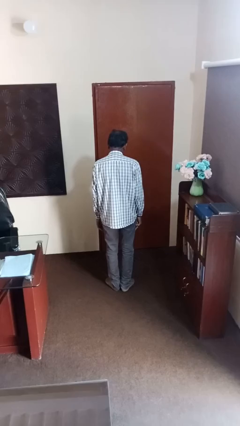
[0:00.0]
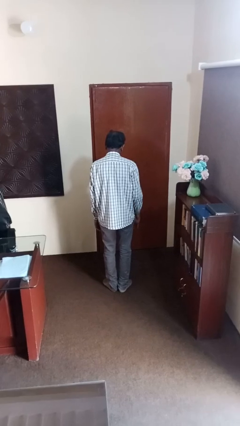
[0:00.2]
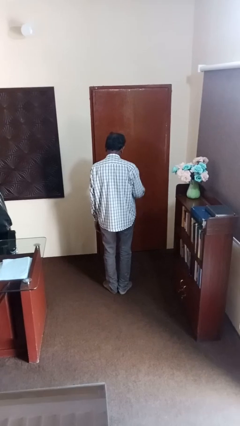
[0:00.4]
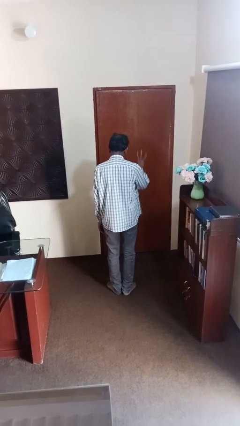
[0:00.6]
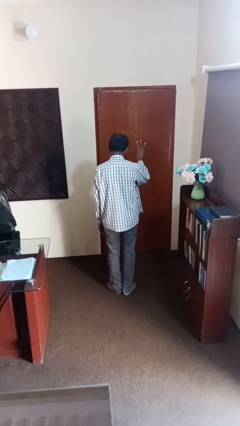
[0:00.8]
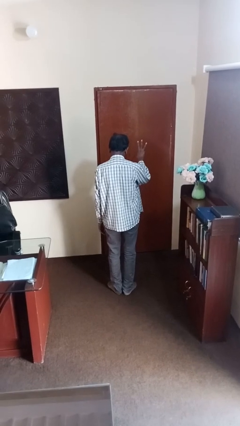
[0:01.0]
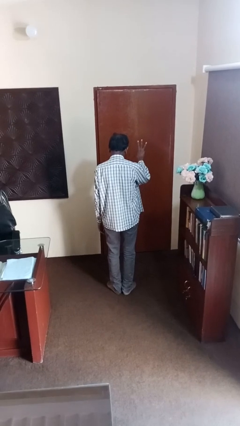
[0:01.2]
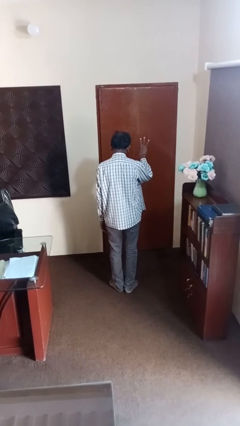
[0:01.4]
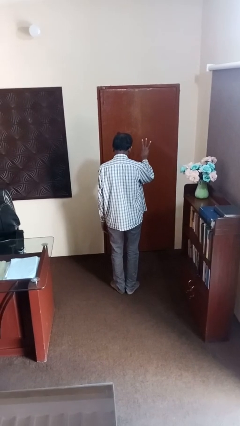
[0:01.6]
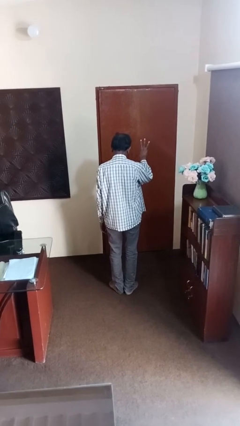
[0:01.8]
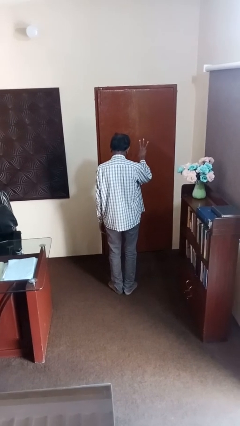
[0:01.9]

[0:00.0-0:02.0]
person gestures number three

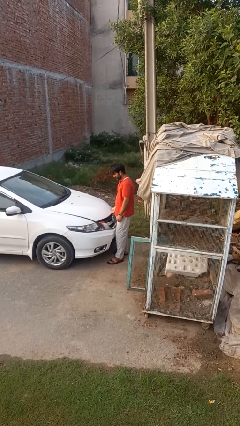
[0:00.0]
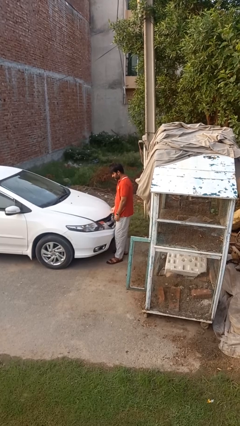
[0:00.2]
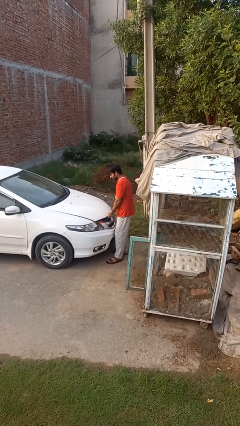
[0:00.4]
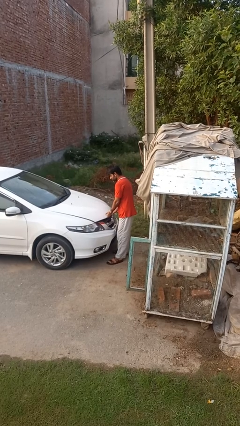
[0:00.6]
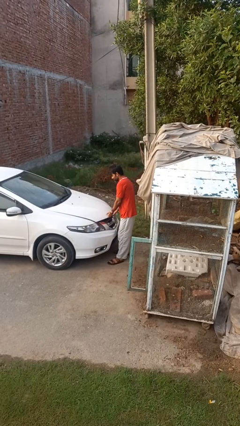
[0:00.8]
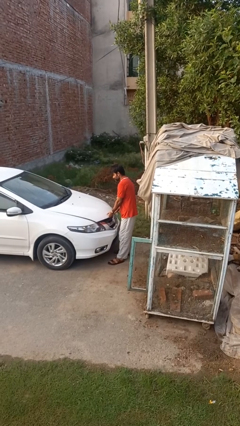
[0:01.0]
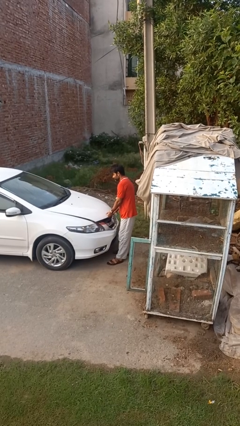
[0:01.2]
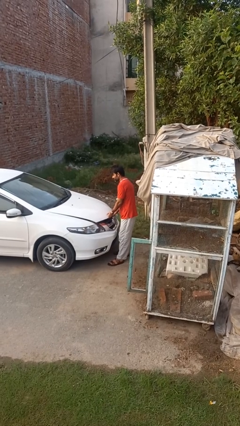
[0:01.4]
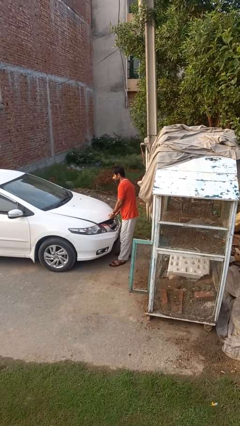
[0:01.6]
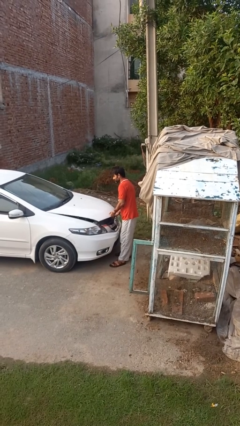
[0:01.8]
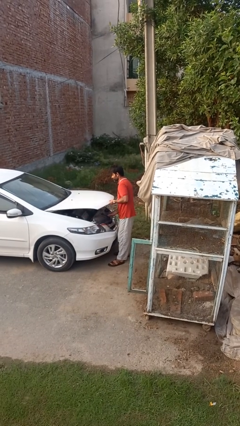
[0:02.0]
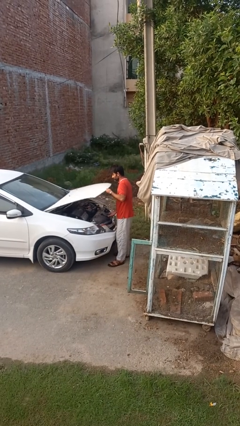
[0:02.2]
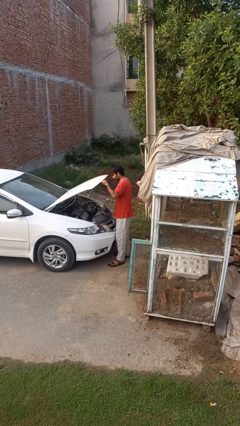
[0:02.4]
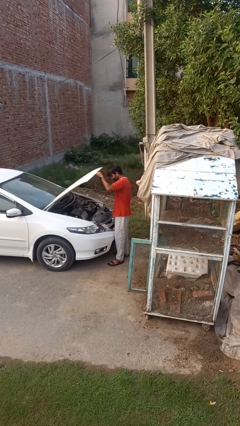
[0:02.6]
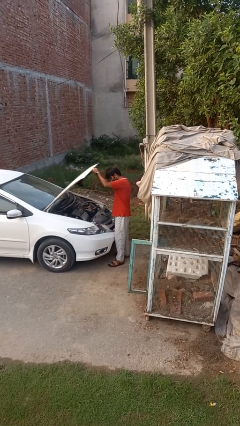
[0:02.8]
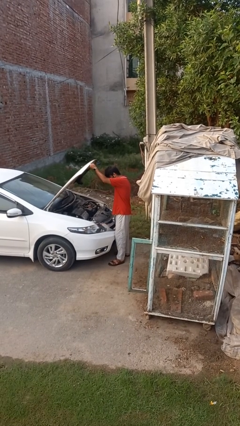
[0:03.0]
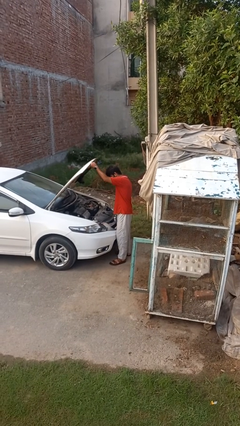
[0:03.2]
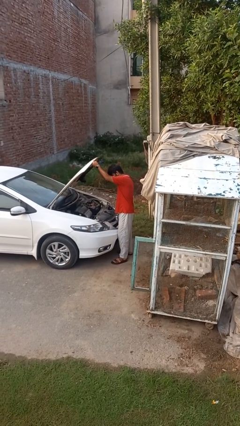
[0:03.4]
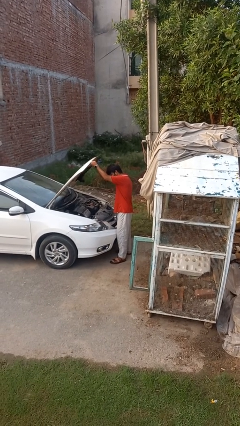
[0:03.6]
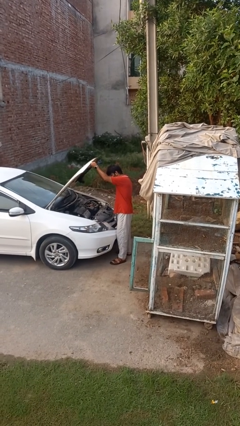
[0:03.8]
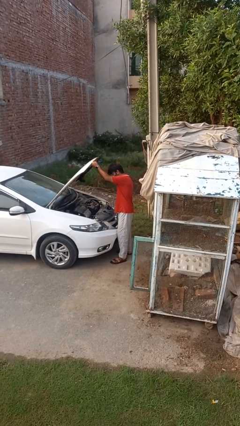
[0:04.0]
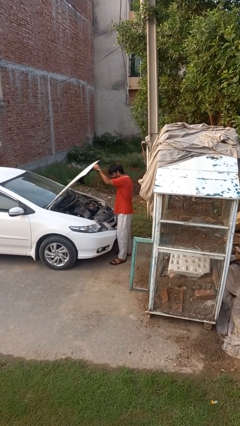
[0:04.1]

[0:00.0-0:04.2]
person opens car hood

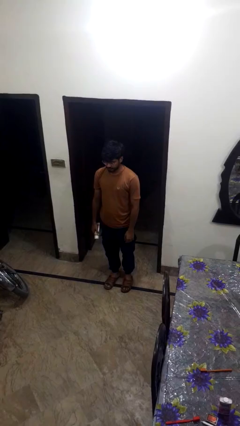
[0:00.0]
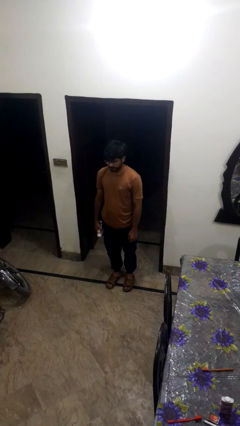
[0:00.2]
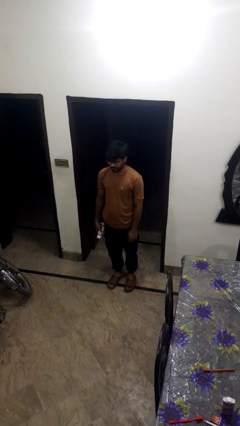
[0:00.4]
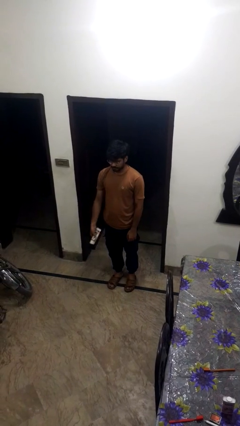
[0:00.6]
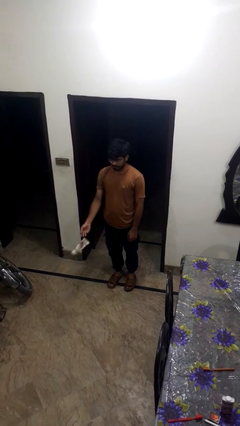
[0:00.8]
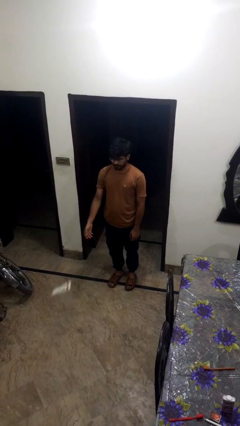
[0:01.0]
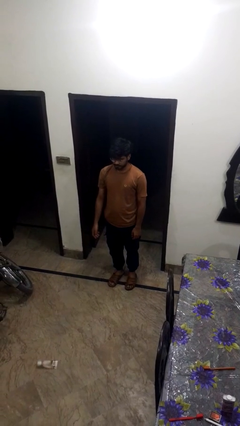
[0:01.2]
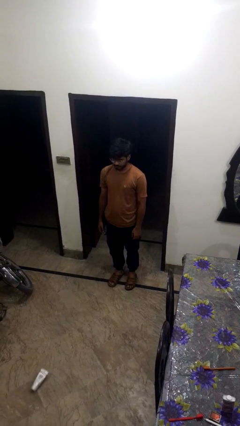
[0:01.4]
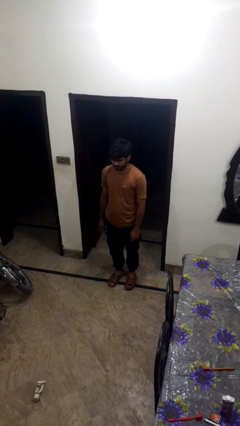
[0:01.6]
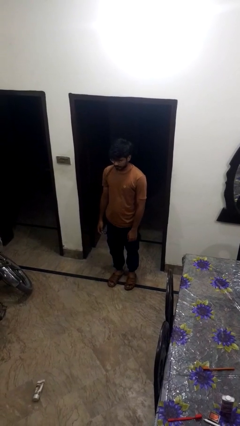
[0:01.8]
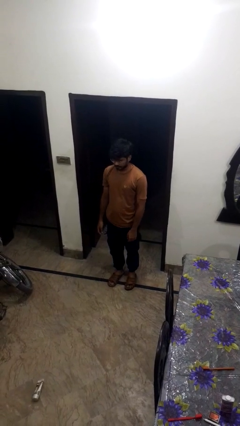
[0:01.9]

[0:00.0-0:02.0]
person throws object to ground

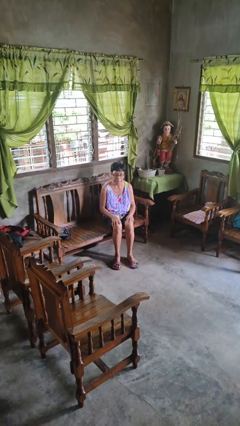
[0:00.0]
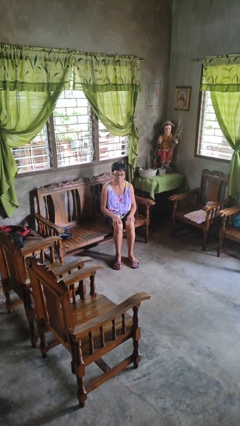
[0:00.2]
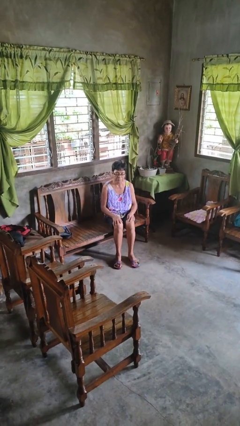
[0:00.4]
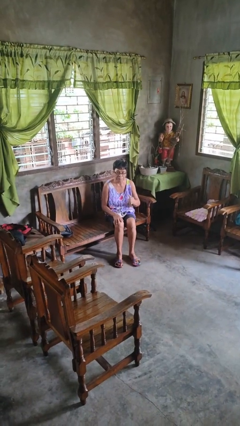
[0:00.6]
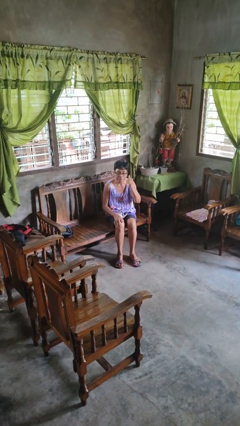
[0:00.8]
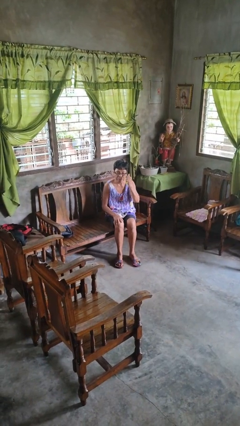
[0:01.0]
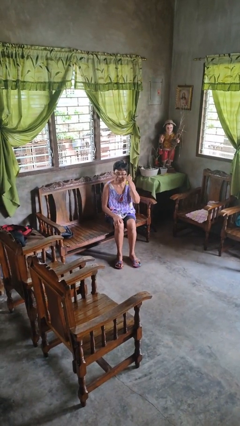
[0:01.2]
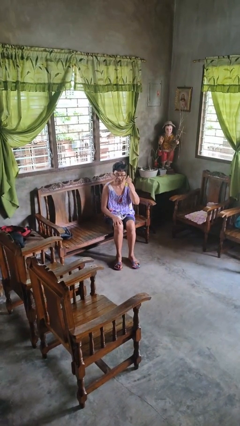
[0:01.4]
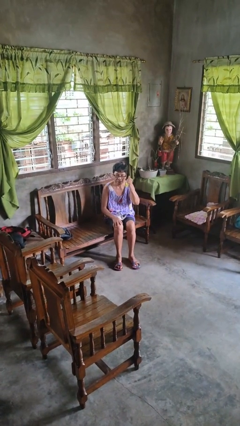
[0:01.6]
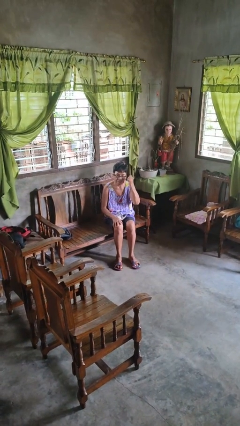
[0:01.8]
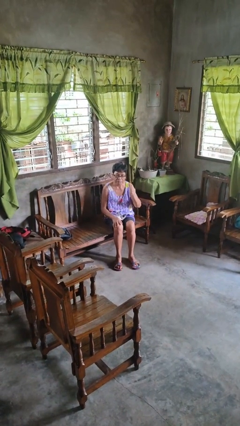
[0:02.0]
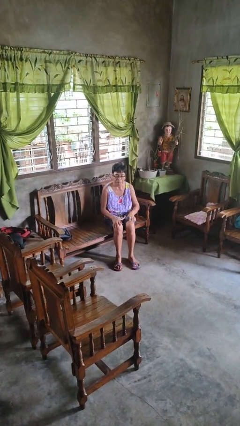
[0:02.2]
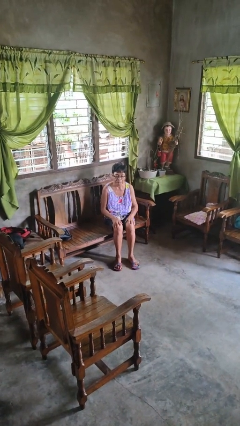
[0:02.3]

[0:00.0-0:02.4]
person gestures behind me

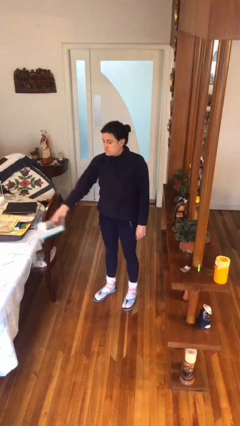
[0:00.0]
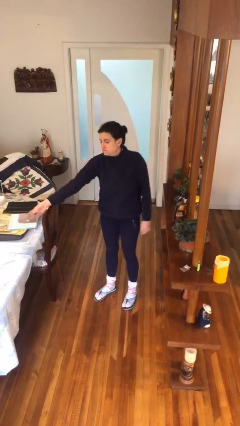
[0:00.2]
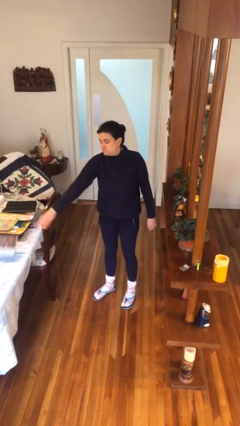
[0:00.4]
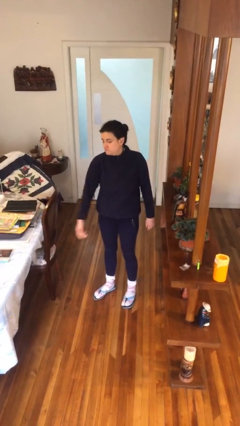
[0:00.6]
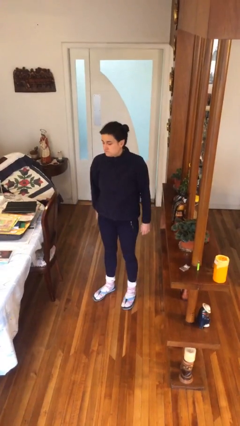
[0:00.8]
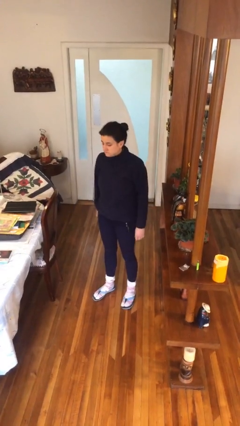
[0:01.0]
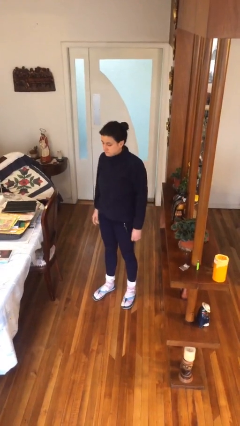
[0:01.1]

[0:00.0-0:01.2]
person throws object on table

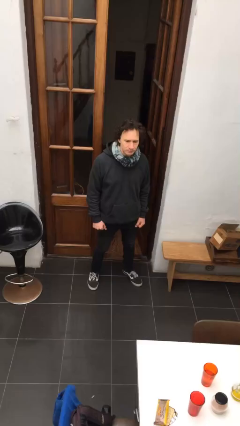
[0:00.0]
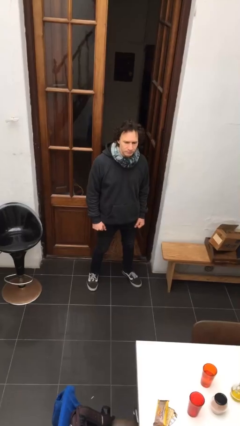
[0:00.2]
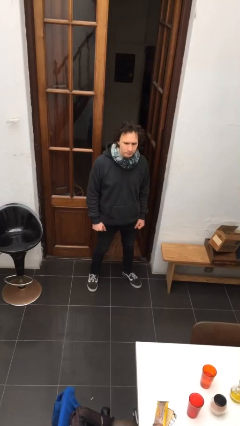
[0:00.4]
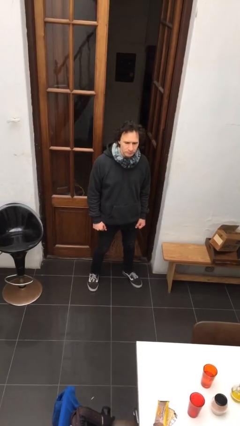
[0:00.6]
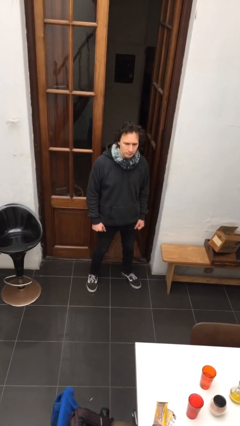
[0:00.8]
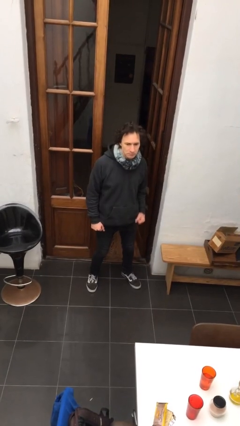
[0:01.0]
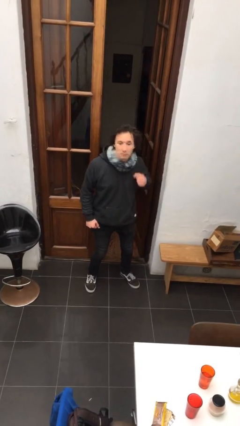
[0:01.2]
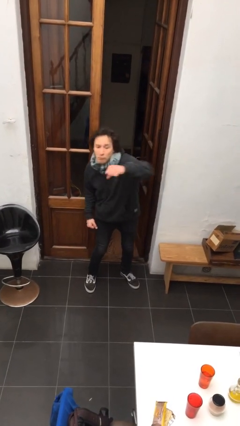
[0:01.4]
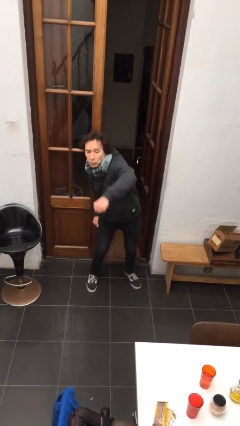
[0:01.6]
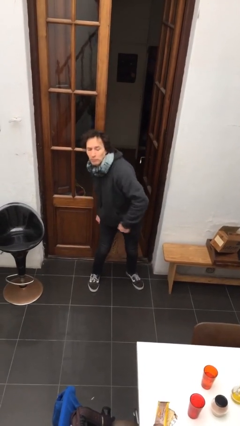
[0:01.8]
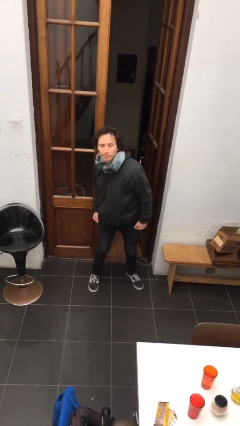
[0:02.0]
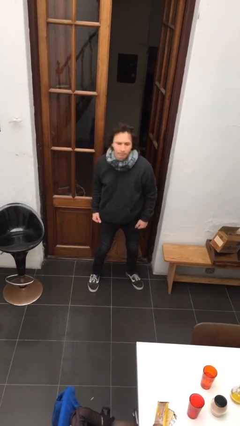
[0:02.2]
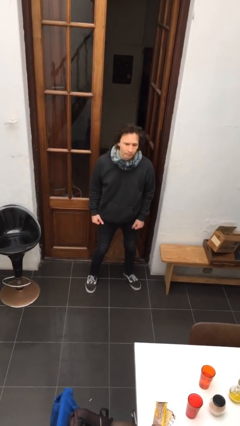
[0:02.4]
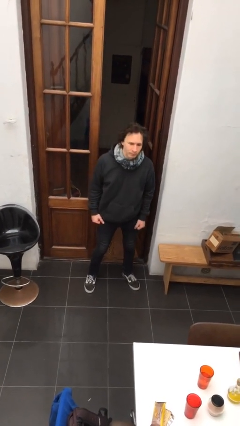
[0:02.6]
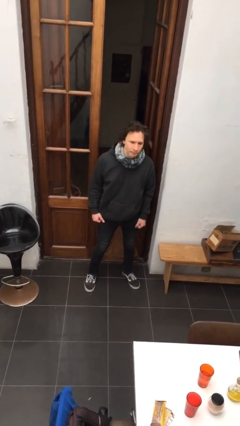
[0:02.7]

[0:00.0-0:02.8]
person punches

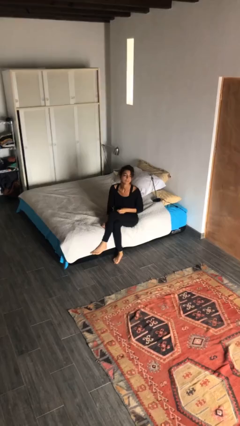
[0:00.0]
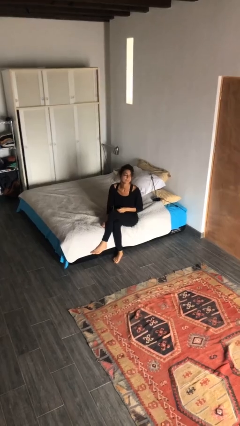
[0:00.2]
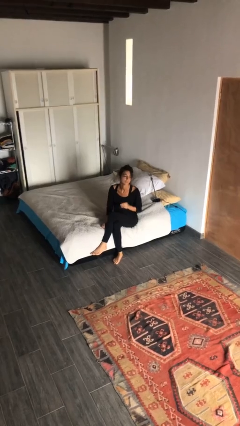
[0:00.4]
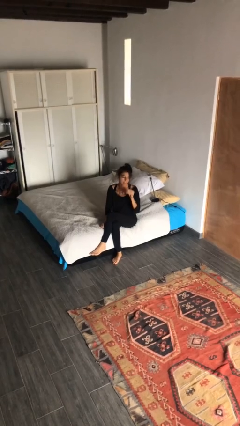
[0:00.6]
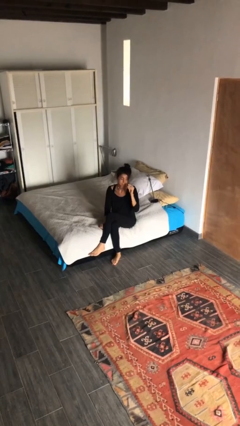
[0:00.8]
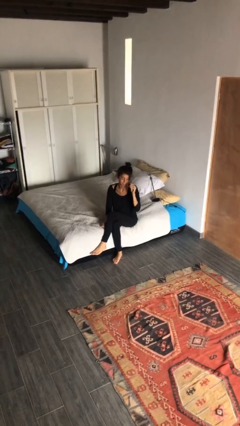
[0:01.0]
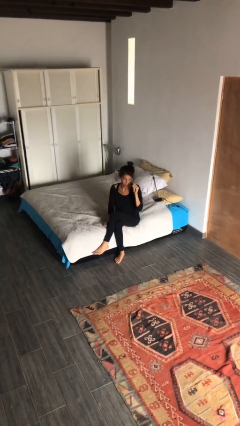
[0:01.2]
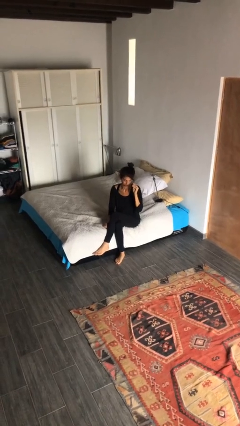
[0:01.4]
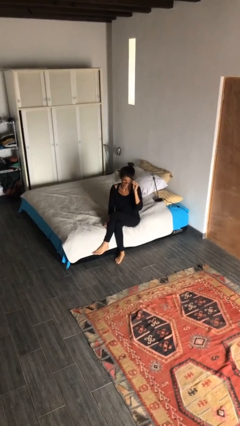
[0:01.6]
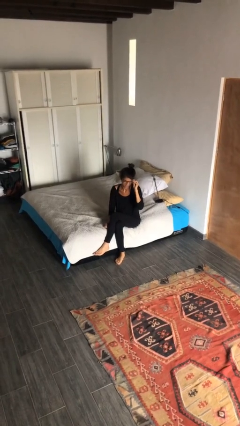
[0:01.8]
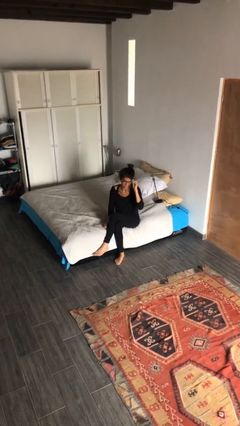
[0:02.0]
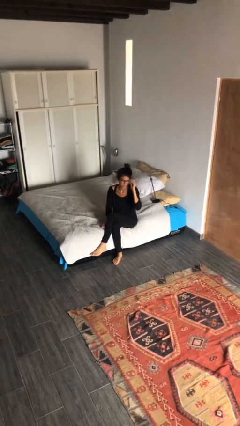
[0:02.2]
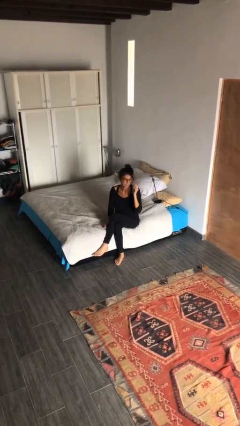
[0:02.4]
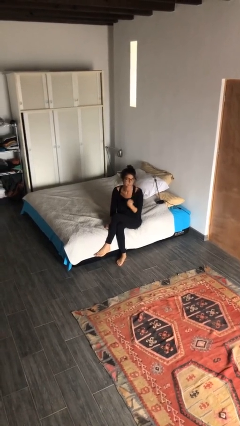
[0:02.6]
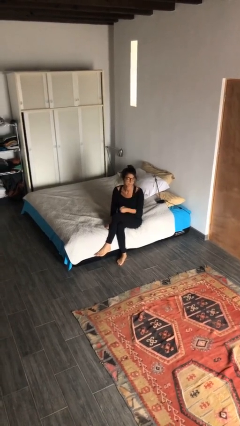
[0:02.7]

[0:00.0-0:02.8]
person puts on glasses

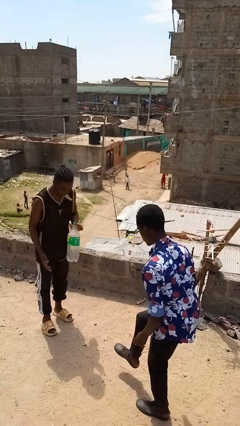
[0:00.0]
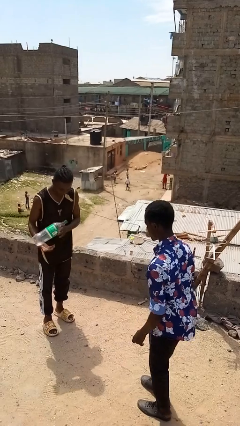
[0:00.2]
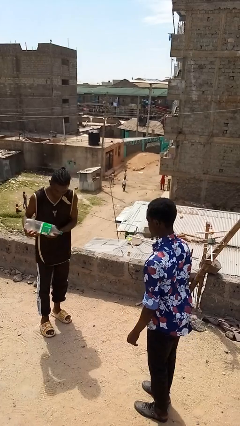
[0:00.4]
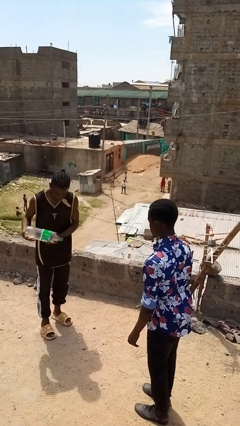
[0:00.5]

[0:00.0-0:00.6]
person kicks object to person